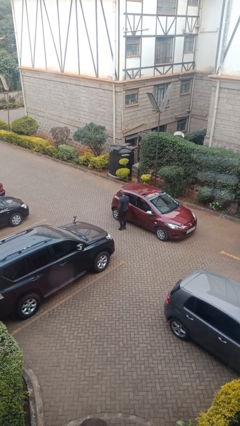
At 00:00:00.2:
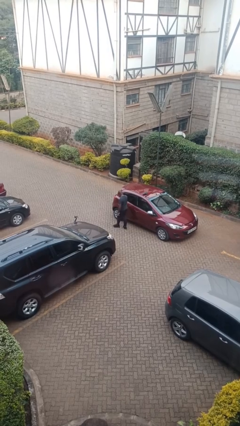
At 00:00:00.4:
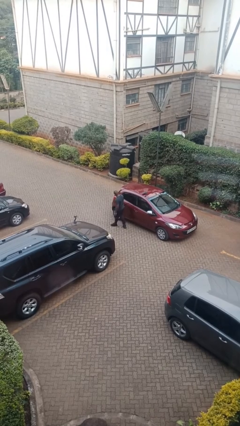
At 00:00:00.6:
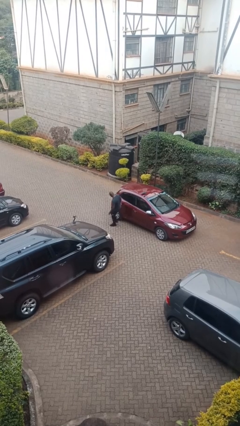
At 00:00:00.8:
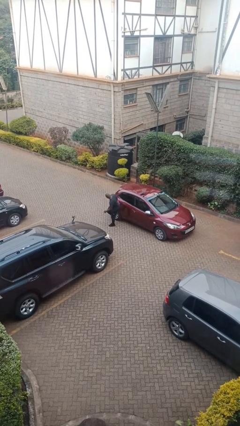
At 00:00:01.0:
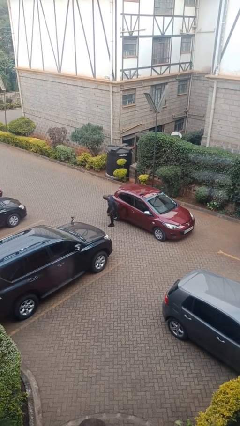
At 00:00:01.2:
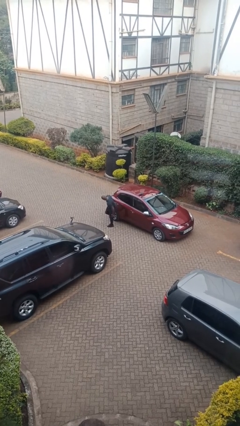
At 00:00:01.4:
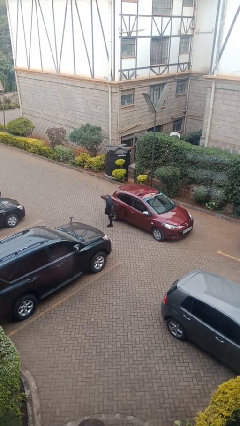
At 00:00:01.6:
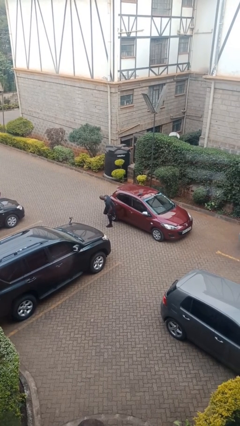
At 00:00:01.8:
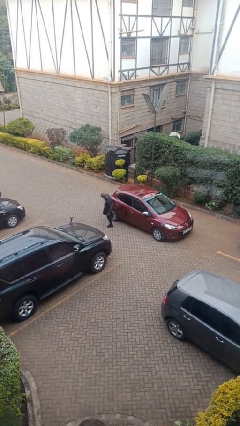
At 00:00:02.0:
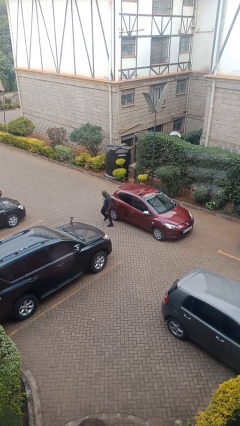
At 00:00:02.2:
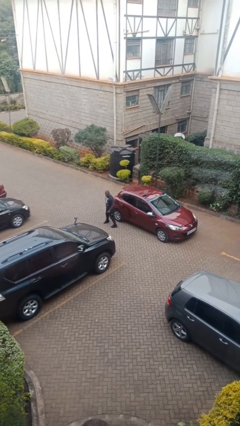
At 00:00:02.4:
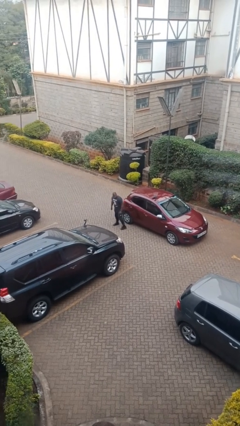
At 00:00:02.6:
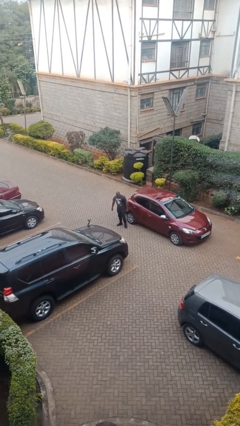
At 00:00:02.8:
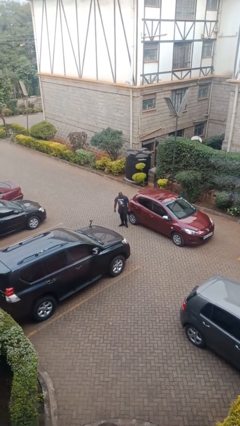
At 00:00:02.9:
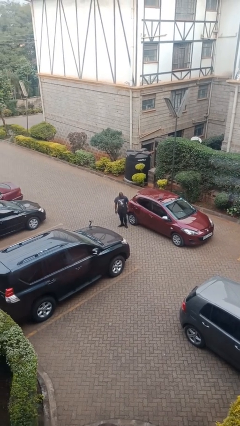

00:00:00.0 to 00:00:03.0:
person kicks car tires

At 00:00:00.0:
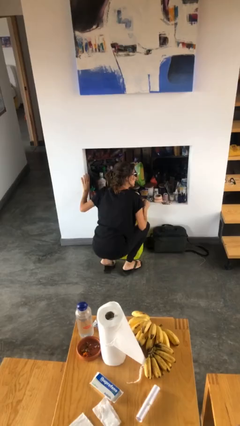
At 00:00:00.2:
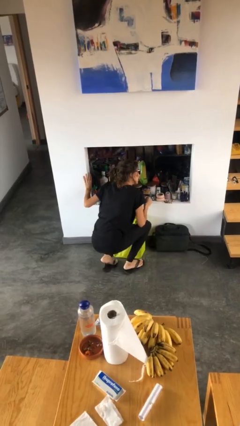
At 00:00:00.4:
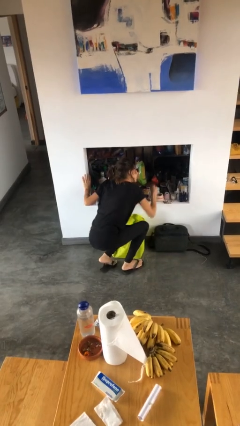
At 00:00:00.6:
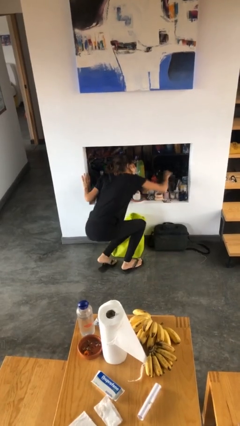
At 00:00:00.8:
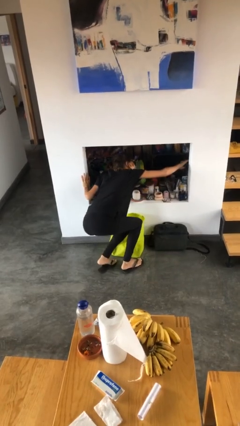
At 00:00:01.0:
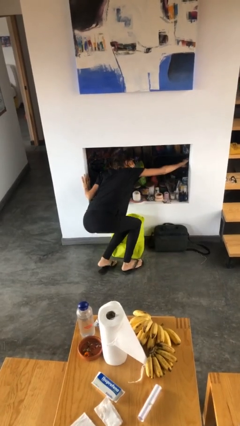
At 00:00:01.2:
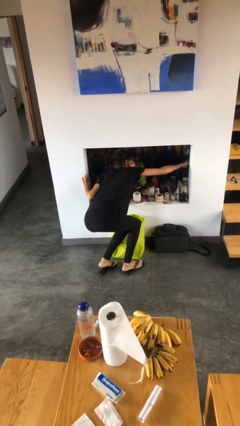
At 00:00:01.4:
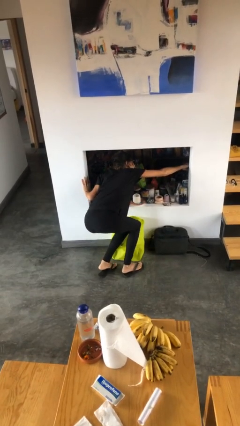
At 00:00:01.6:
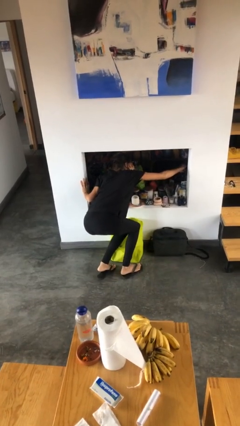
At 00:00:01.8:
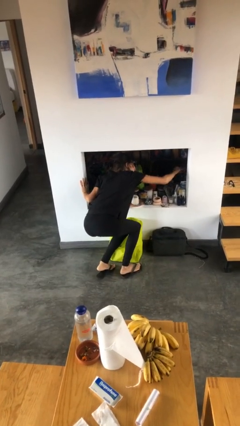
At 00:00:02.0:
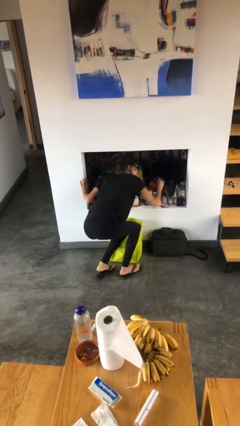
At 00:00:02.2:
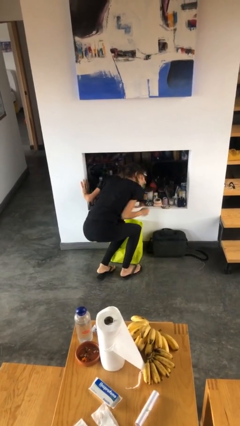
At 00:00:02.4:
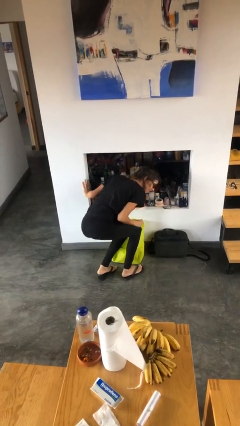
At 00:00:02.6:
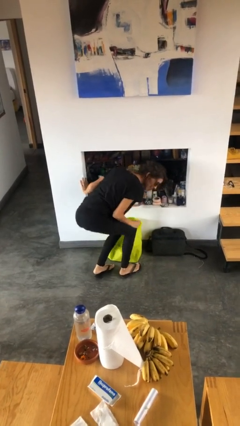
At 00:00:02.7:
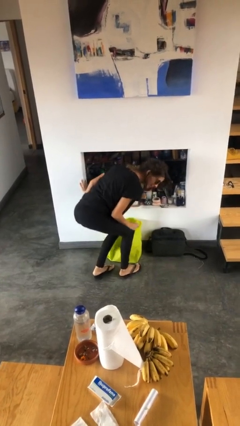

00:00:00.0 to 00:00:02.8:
person searches in cabinet

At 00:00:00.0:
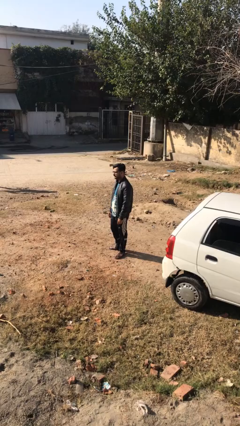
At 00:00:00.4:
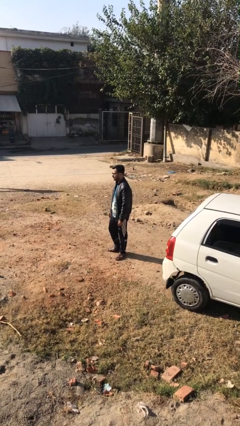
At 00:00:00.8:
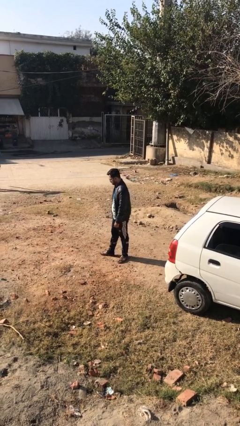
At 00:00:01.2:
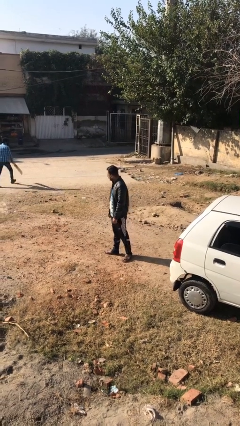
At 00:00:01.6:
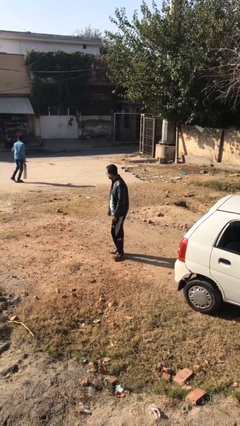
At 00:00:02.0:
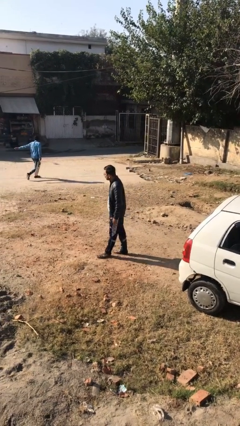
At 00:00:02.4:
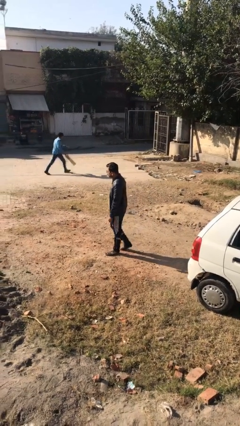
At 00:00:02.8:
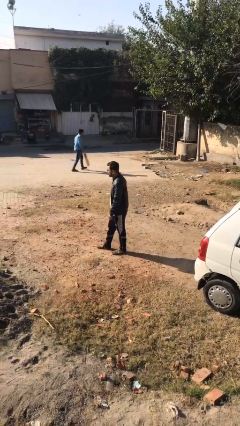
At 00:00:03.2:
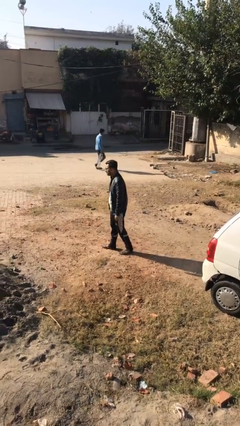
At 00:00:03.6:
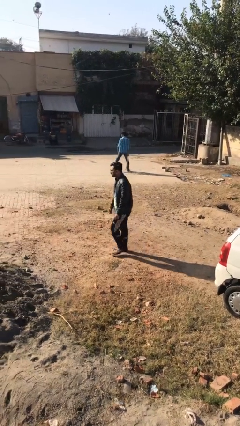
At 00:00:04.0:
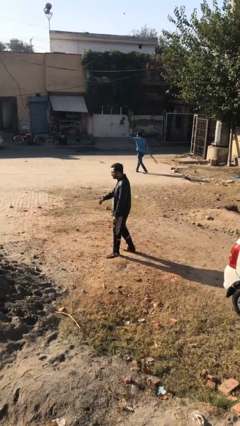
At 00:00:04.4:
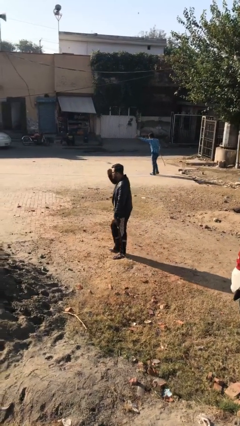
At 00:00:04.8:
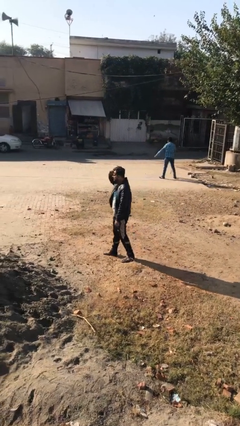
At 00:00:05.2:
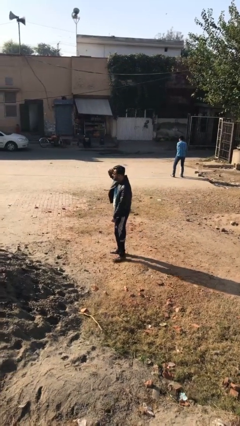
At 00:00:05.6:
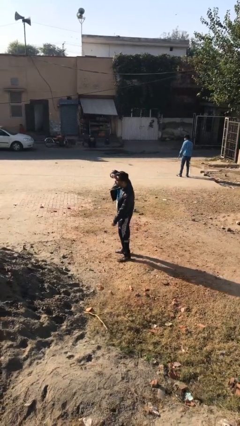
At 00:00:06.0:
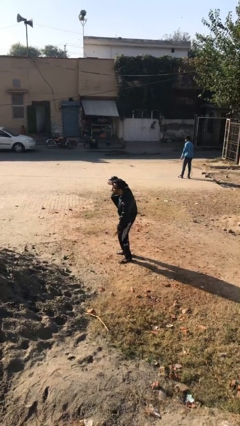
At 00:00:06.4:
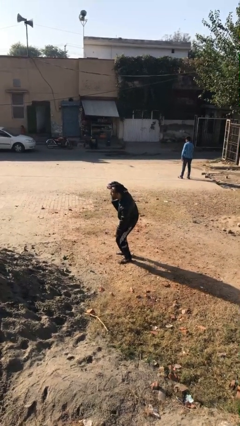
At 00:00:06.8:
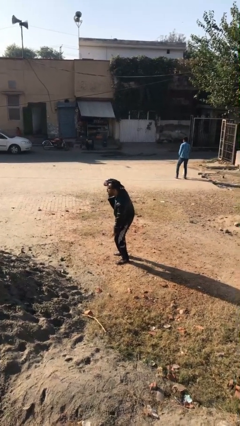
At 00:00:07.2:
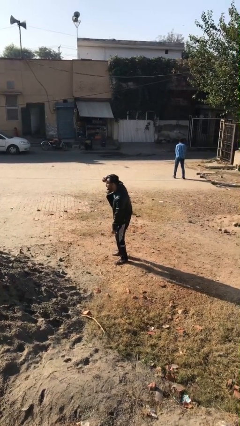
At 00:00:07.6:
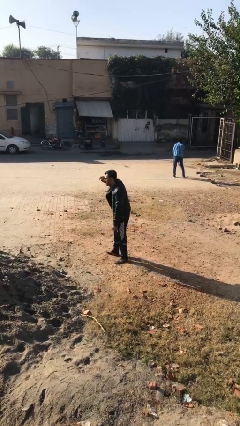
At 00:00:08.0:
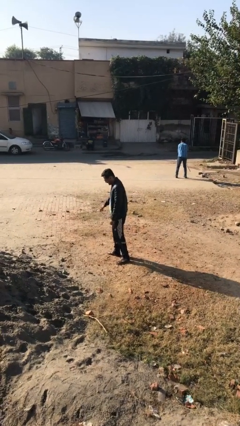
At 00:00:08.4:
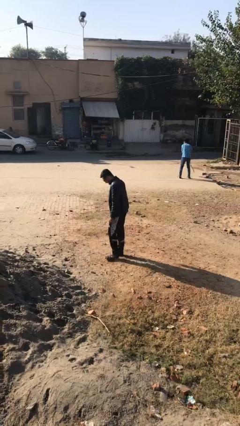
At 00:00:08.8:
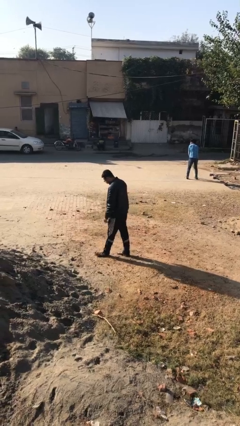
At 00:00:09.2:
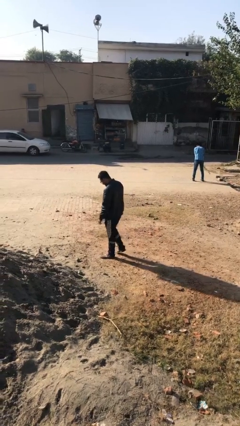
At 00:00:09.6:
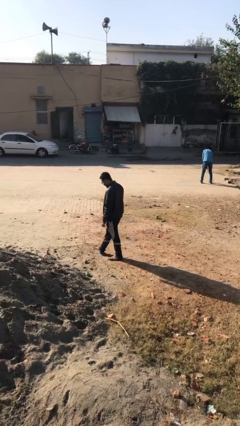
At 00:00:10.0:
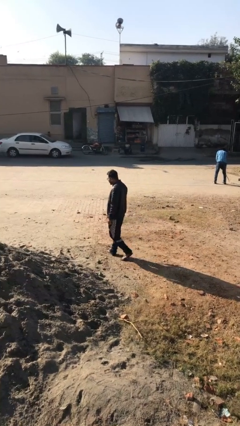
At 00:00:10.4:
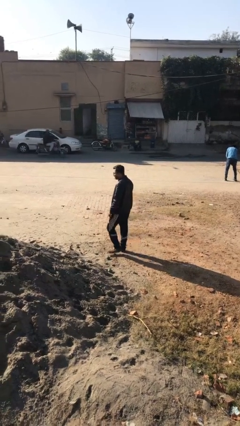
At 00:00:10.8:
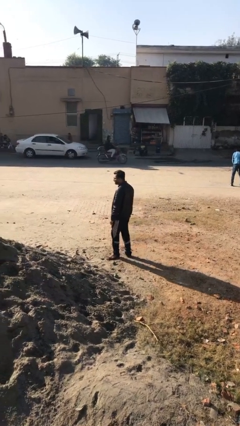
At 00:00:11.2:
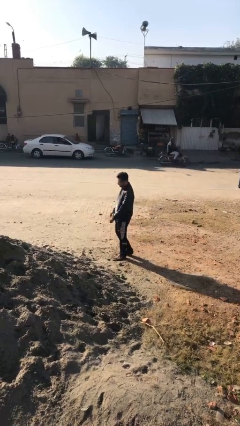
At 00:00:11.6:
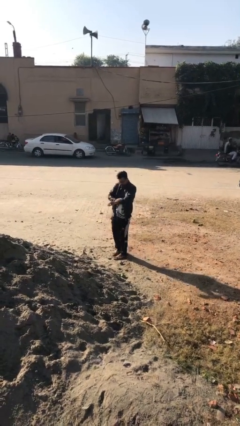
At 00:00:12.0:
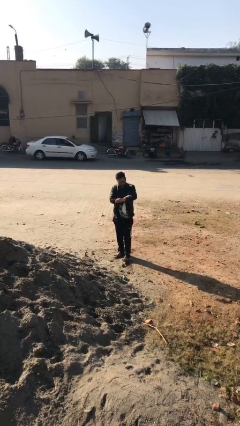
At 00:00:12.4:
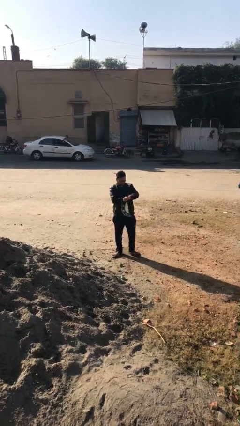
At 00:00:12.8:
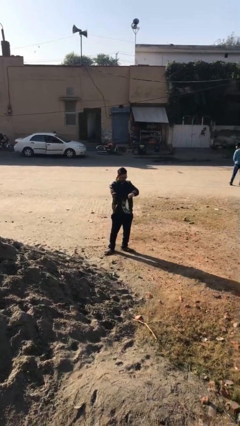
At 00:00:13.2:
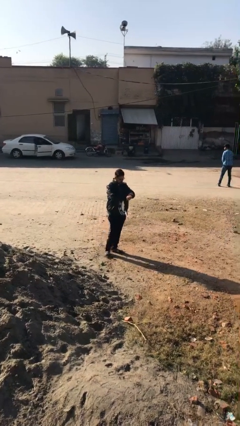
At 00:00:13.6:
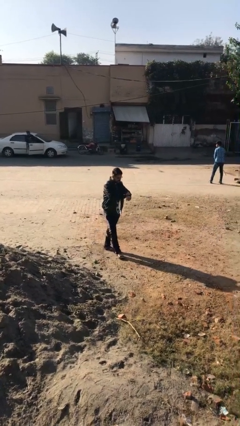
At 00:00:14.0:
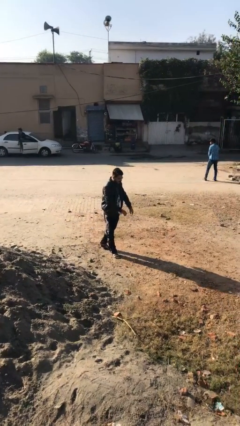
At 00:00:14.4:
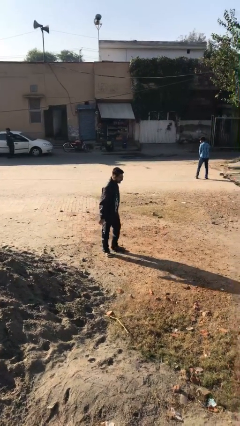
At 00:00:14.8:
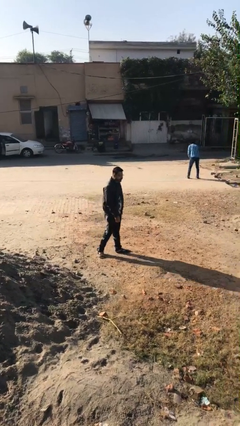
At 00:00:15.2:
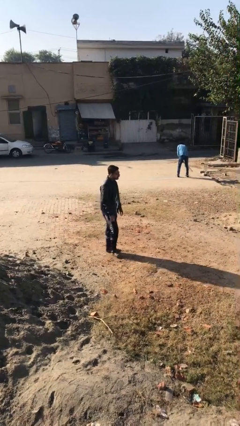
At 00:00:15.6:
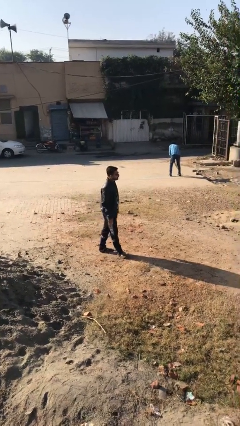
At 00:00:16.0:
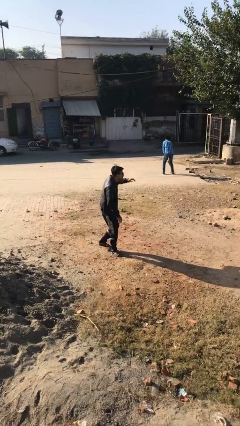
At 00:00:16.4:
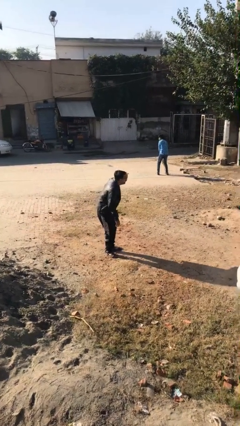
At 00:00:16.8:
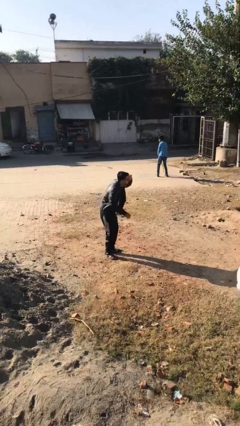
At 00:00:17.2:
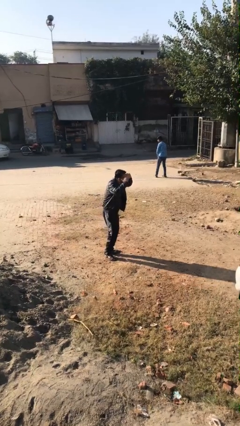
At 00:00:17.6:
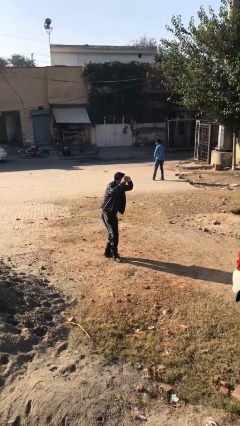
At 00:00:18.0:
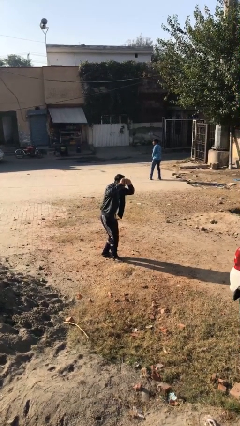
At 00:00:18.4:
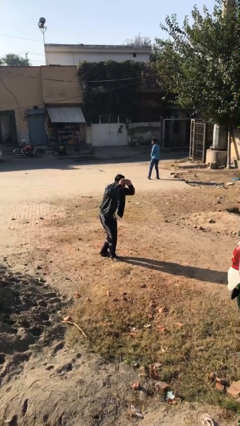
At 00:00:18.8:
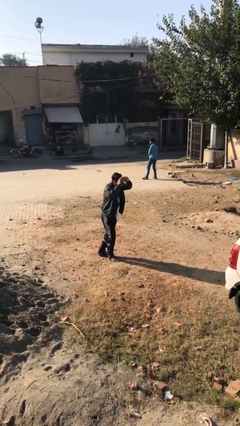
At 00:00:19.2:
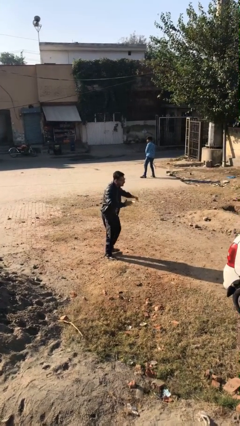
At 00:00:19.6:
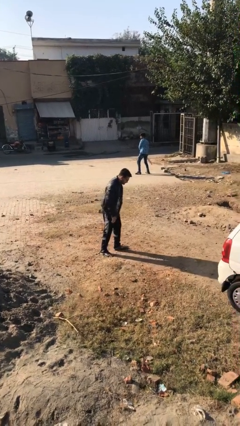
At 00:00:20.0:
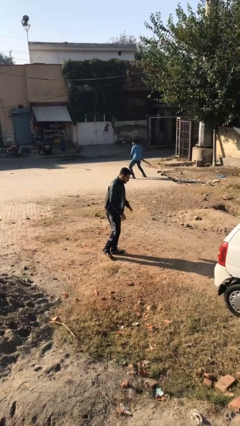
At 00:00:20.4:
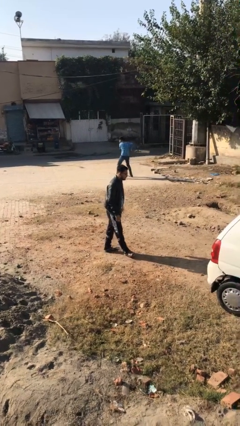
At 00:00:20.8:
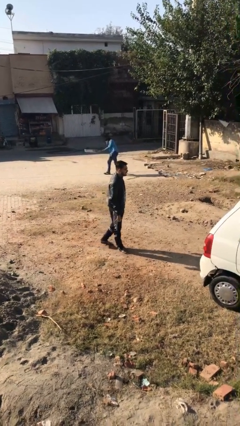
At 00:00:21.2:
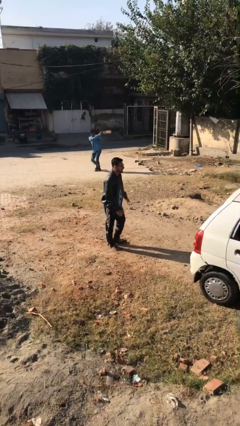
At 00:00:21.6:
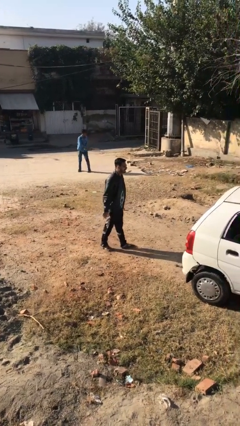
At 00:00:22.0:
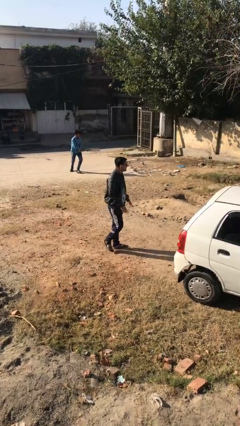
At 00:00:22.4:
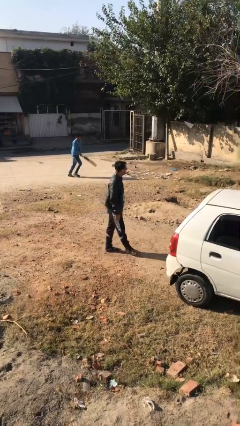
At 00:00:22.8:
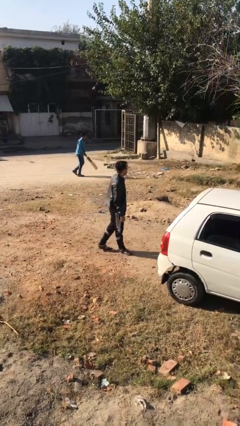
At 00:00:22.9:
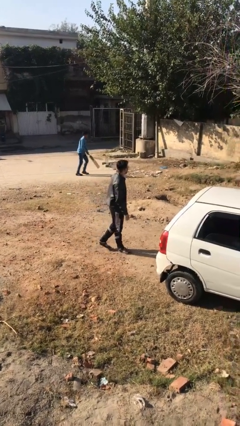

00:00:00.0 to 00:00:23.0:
person walks
